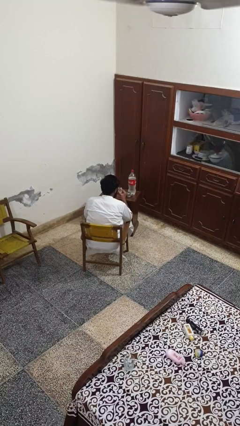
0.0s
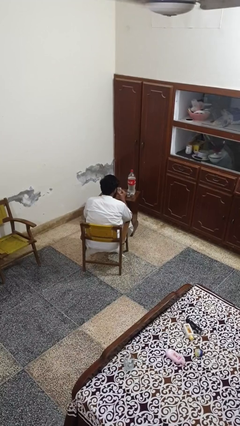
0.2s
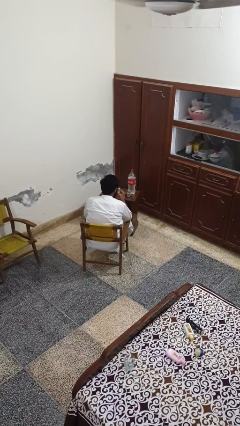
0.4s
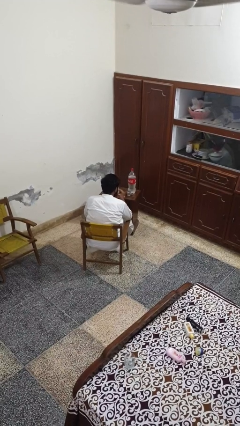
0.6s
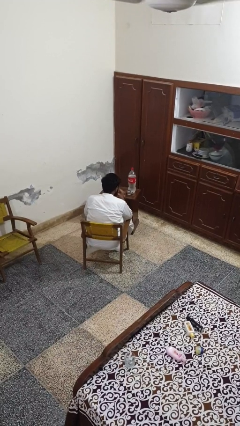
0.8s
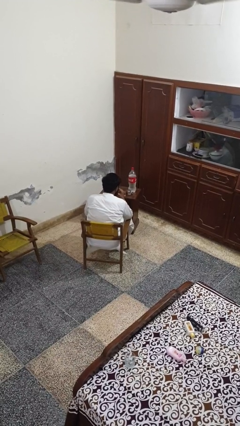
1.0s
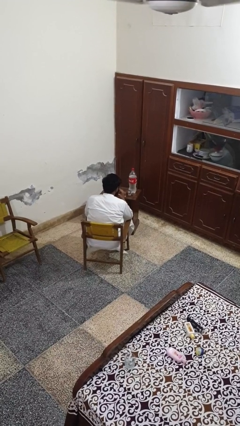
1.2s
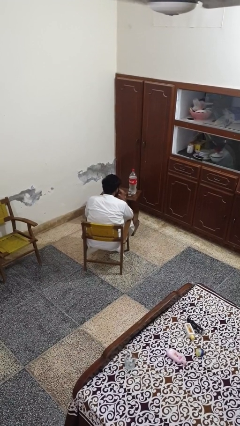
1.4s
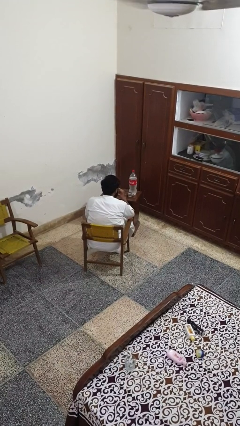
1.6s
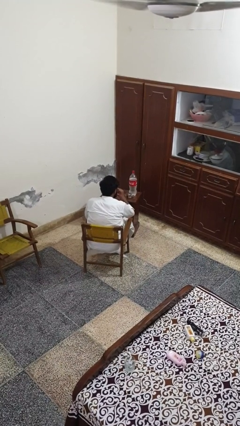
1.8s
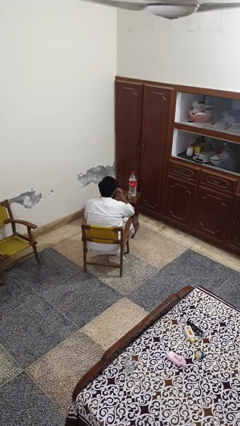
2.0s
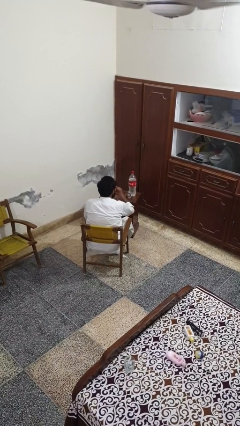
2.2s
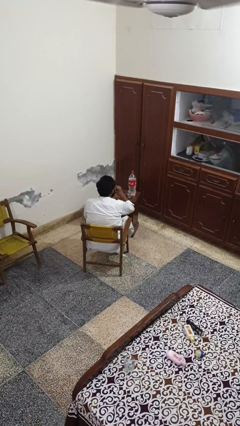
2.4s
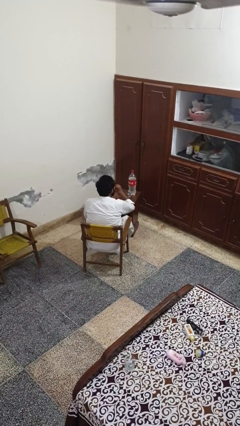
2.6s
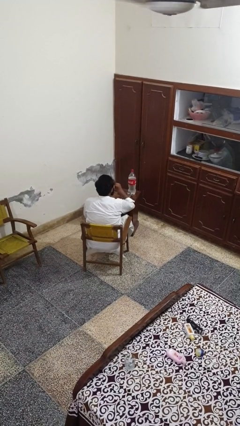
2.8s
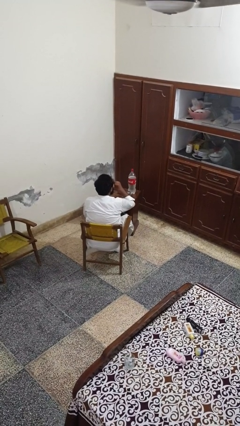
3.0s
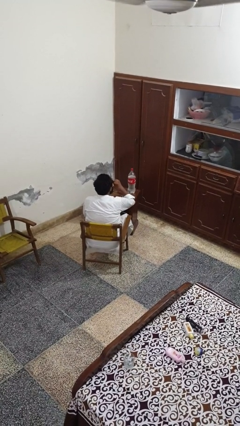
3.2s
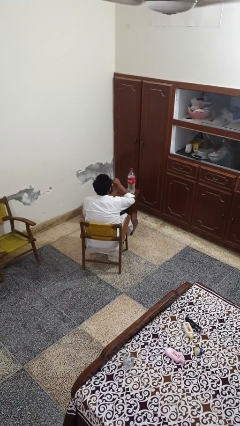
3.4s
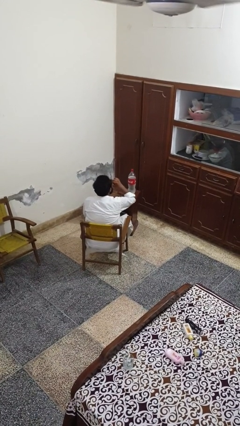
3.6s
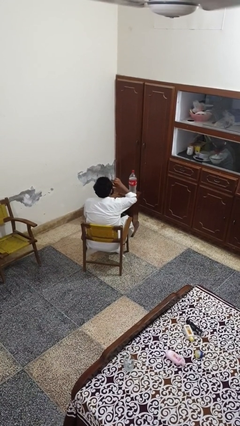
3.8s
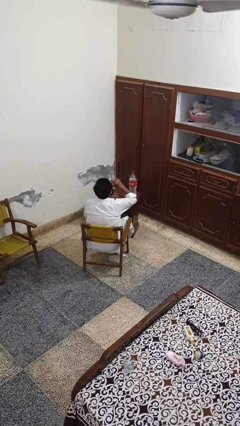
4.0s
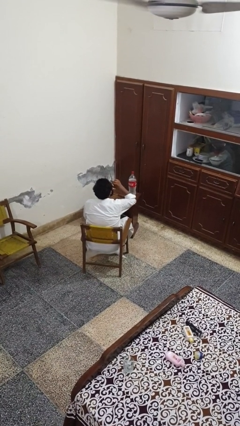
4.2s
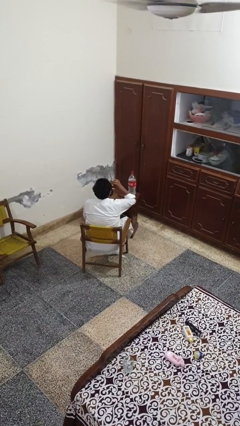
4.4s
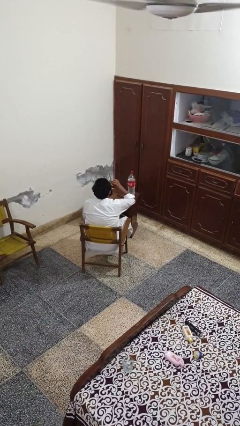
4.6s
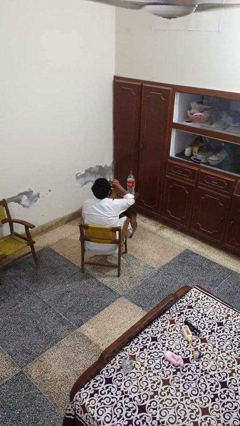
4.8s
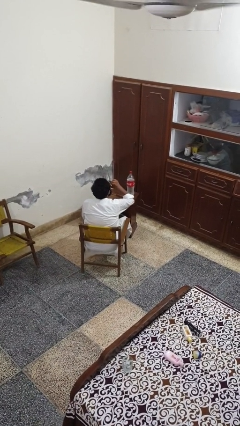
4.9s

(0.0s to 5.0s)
person drinks from shotglass

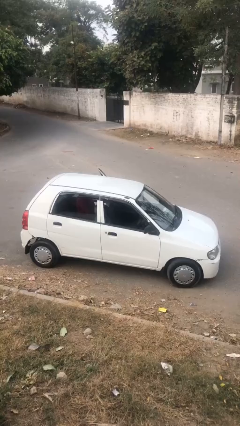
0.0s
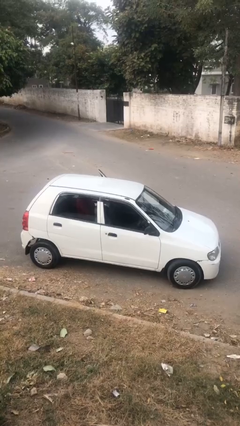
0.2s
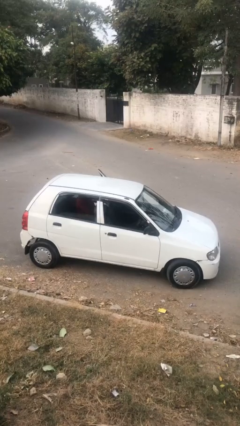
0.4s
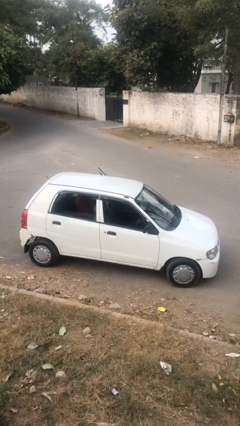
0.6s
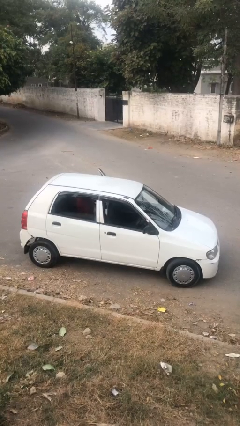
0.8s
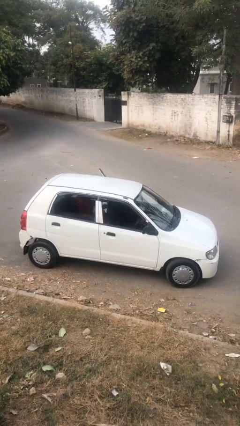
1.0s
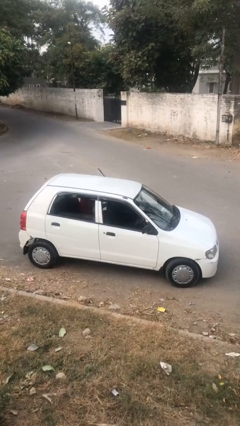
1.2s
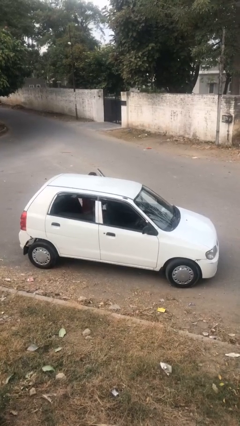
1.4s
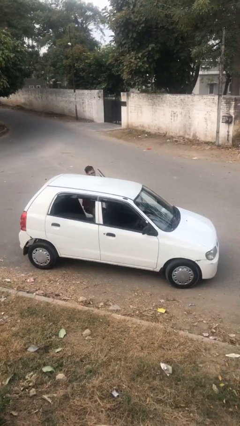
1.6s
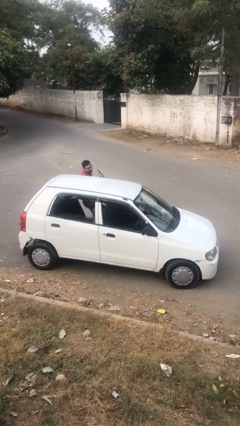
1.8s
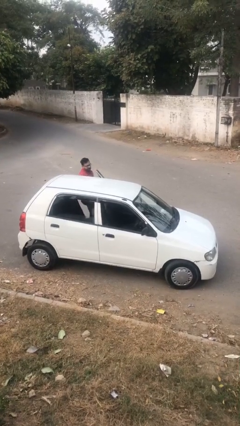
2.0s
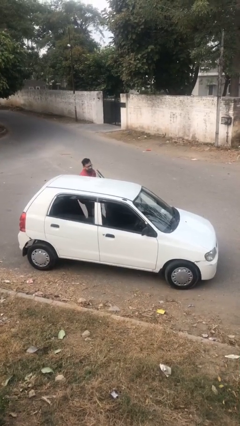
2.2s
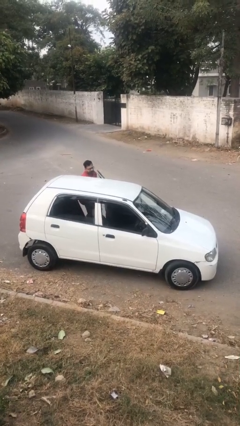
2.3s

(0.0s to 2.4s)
car drops off person

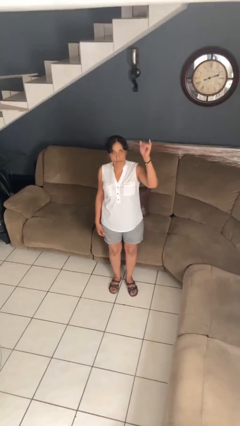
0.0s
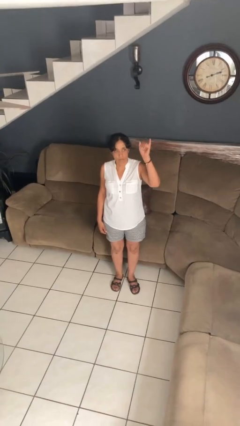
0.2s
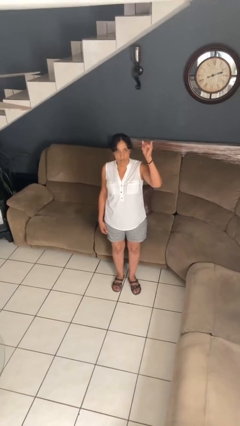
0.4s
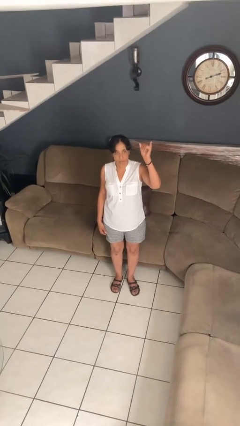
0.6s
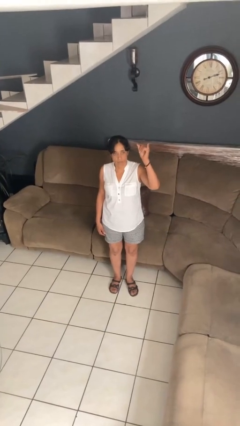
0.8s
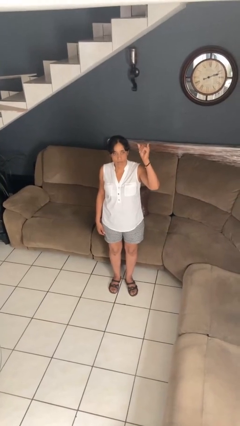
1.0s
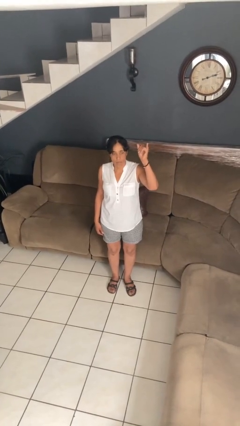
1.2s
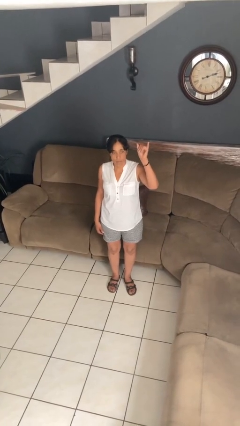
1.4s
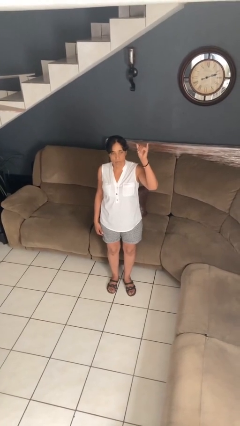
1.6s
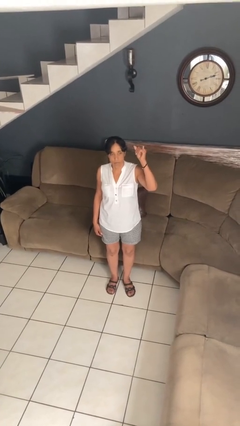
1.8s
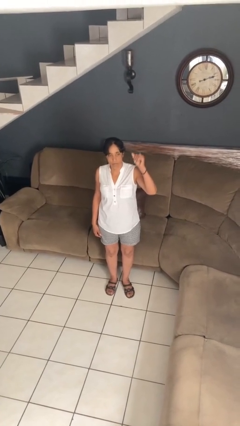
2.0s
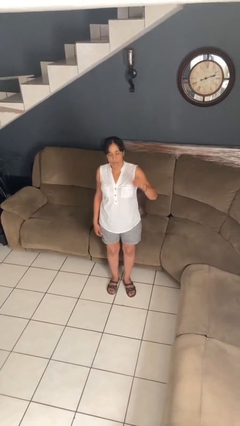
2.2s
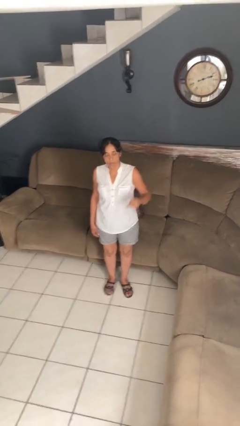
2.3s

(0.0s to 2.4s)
person gestures hang loose

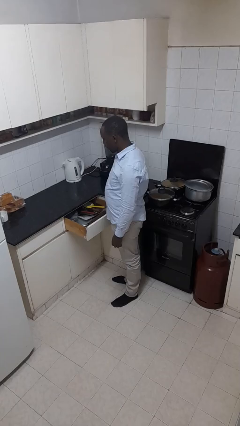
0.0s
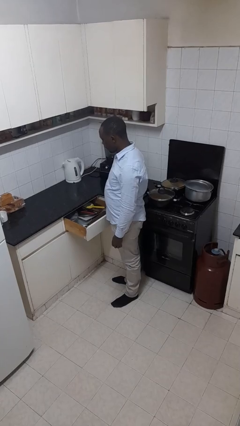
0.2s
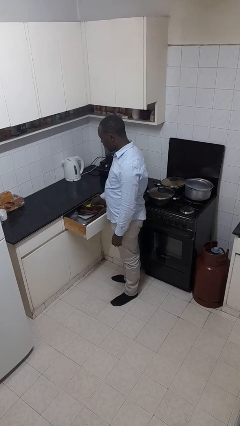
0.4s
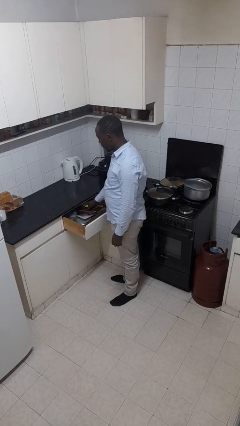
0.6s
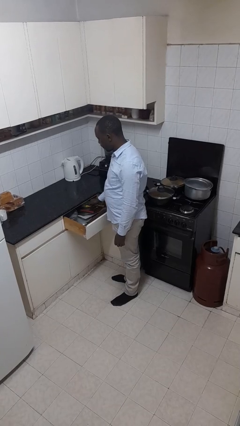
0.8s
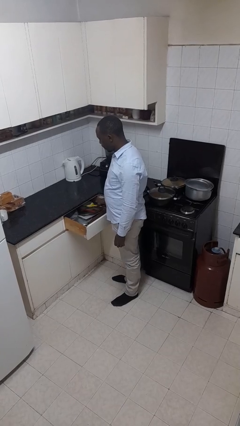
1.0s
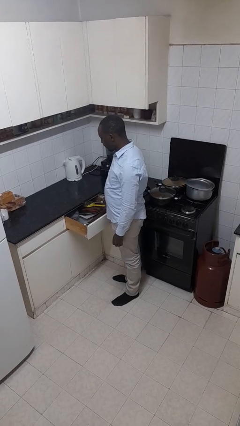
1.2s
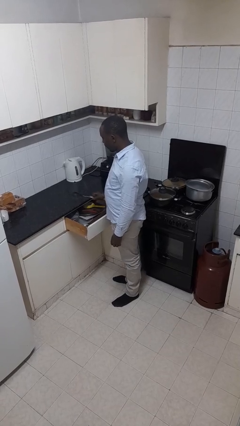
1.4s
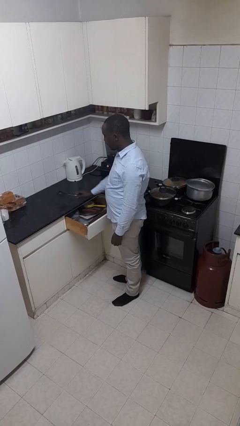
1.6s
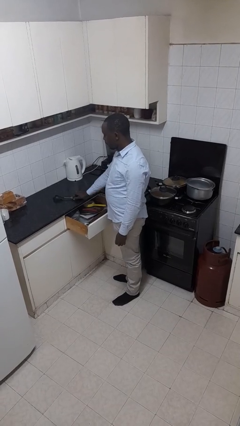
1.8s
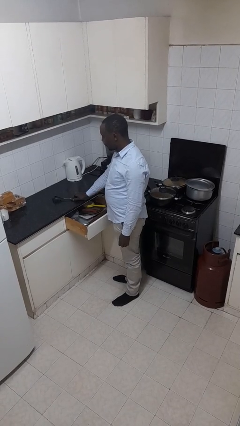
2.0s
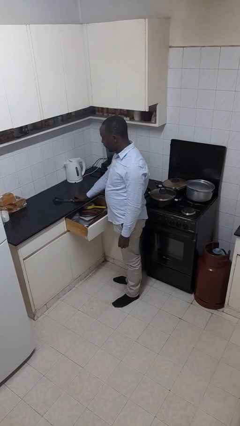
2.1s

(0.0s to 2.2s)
person takes object from kitchen drawer

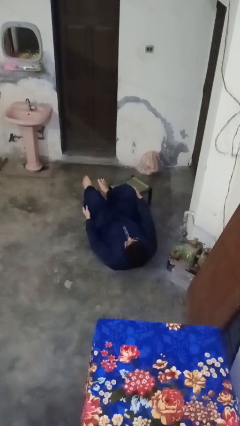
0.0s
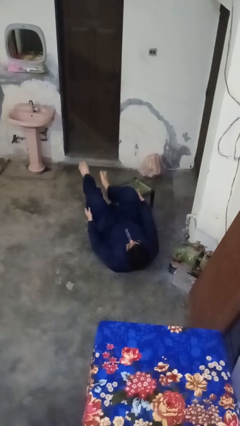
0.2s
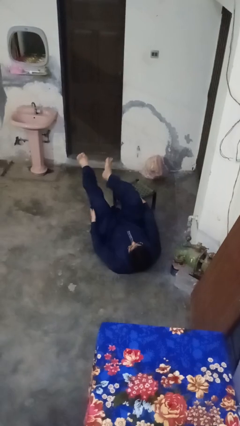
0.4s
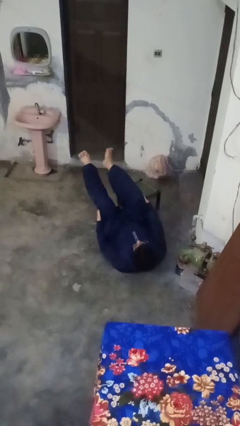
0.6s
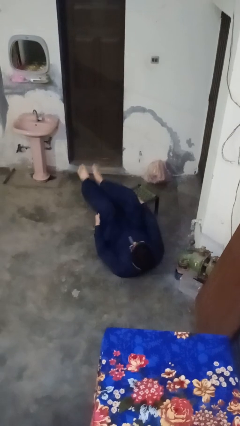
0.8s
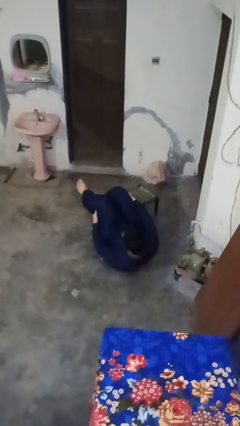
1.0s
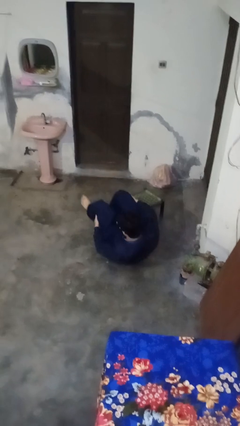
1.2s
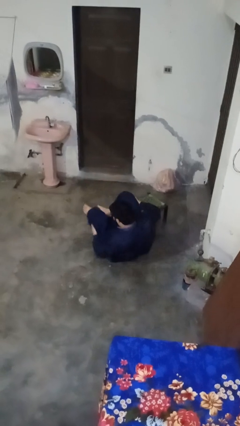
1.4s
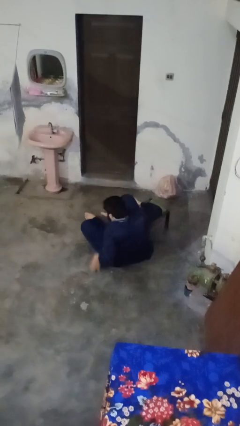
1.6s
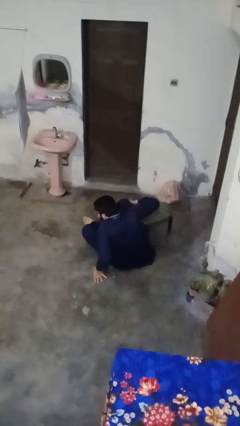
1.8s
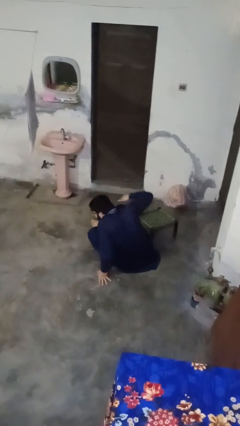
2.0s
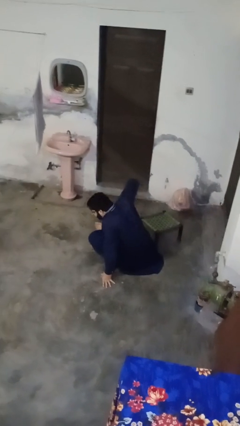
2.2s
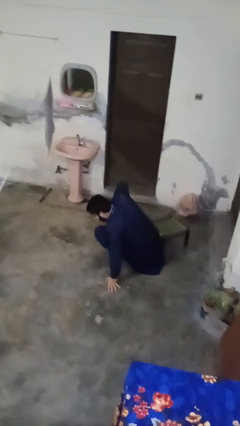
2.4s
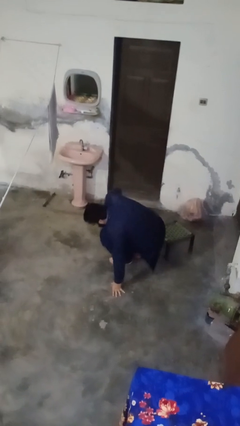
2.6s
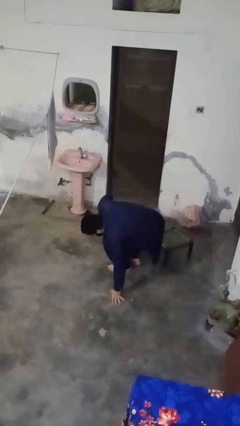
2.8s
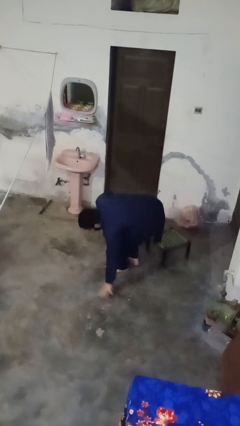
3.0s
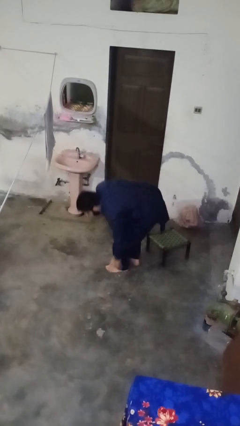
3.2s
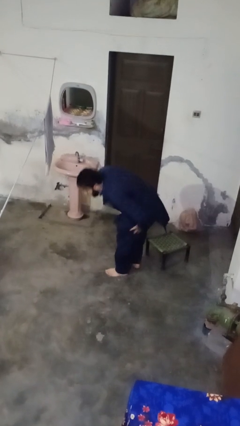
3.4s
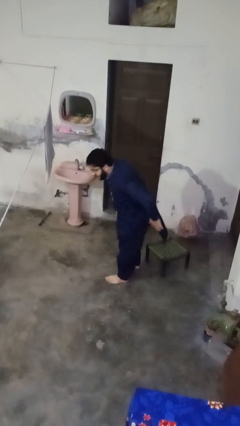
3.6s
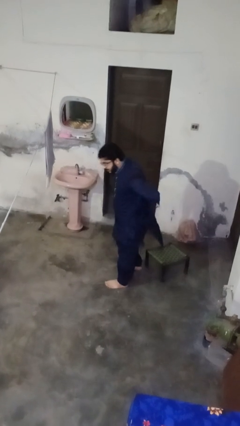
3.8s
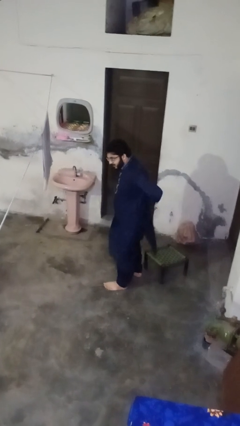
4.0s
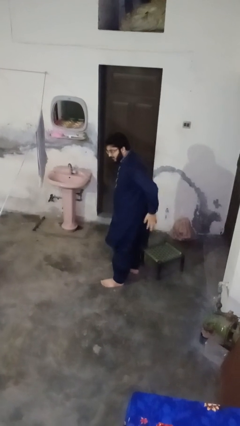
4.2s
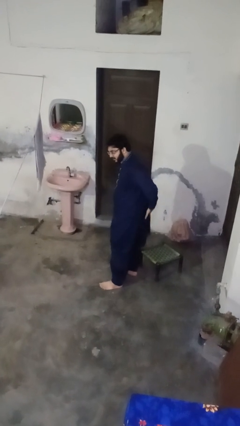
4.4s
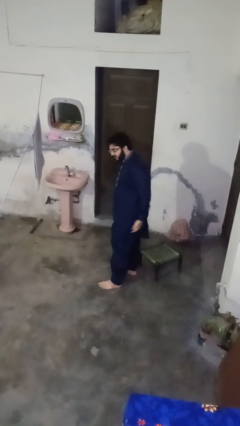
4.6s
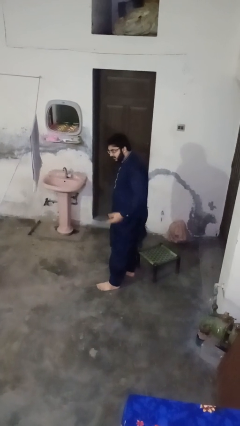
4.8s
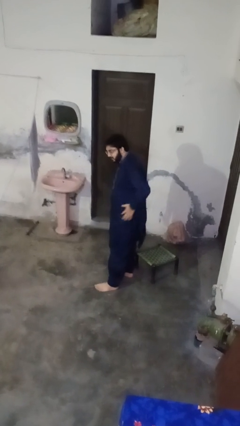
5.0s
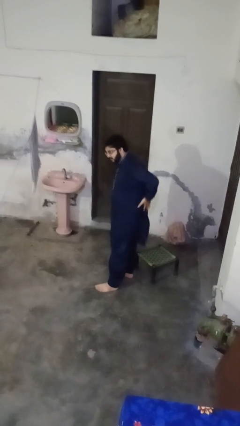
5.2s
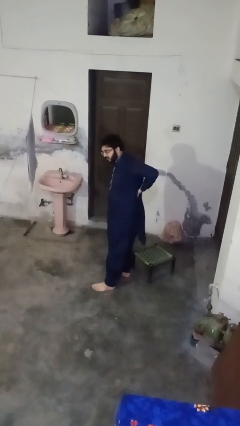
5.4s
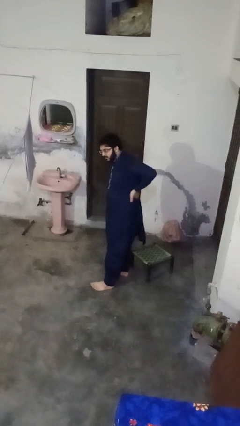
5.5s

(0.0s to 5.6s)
person stands up from floor
